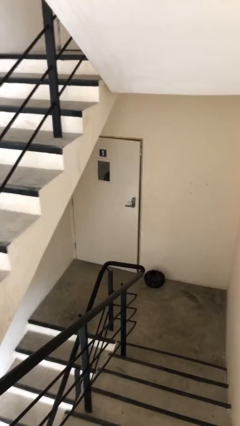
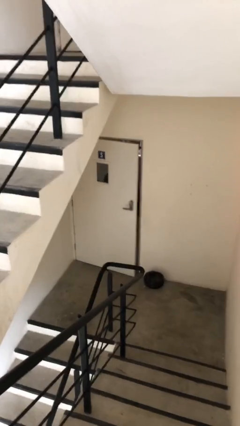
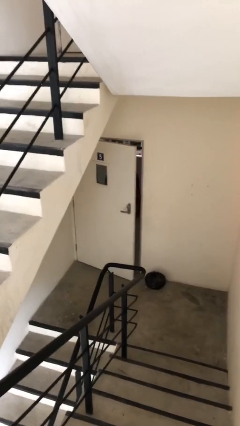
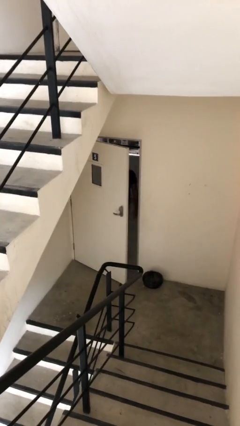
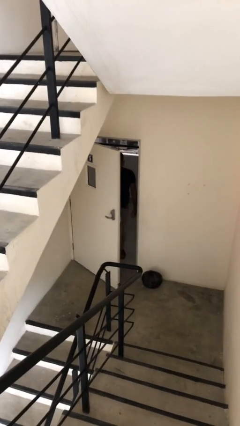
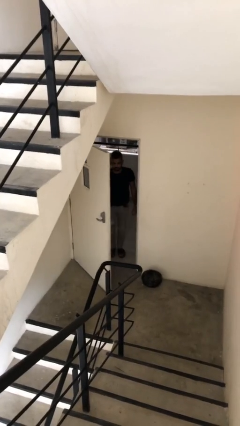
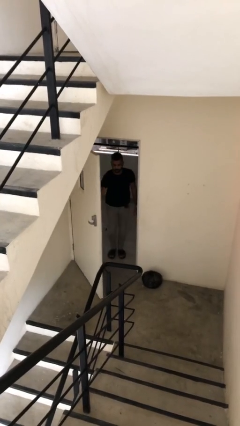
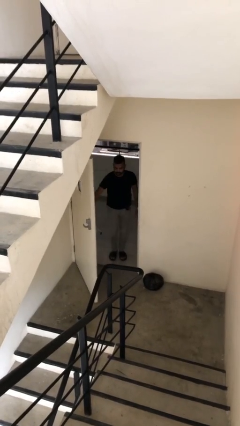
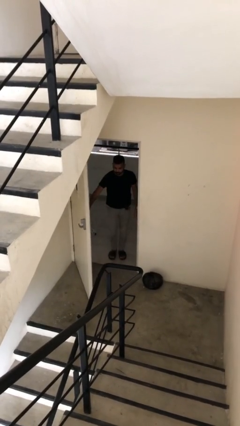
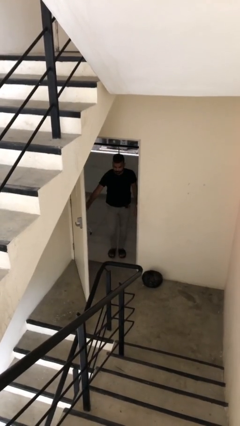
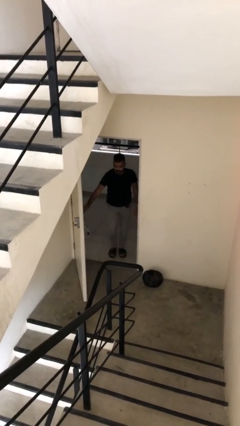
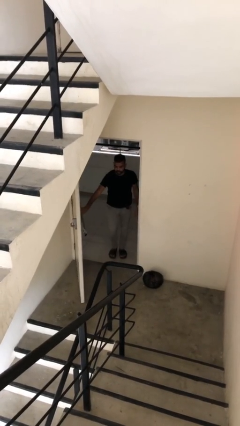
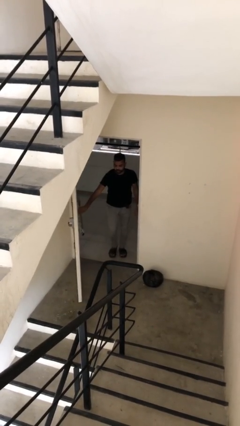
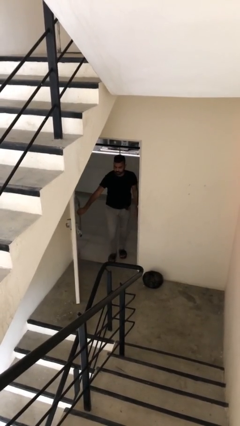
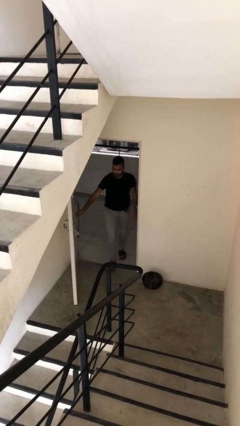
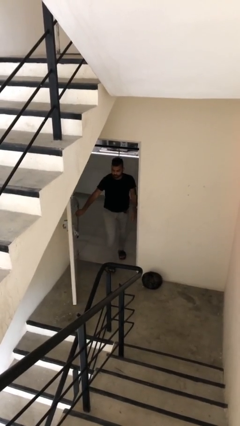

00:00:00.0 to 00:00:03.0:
person opens facility door

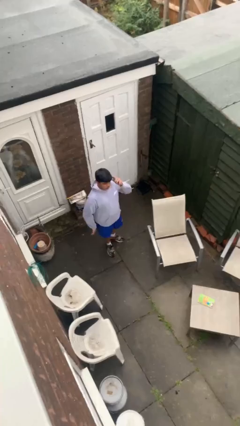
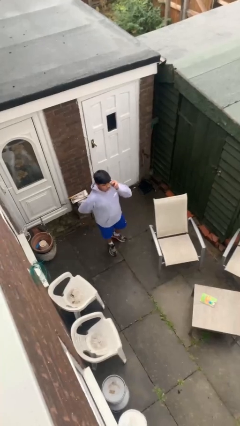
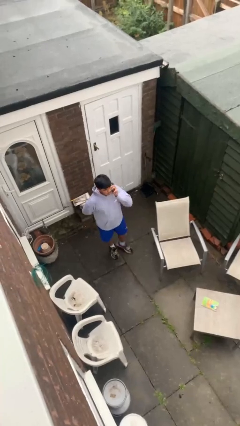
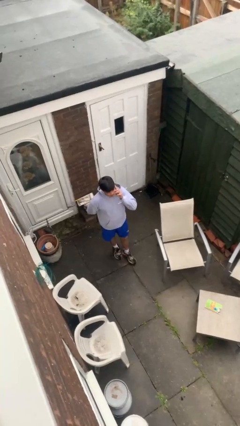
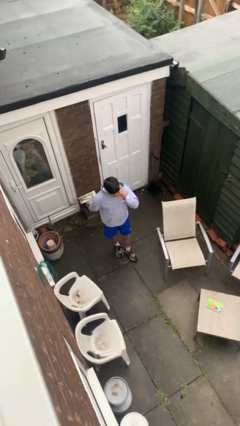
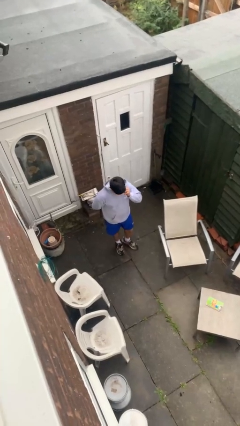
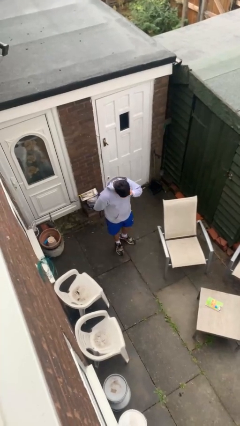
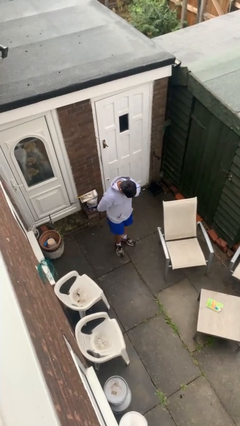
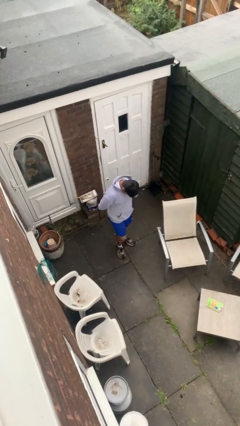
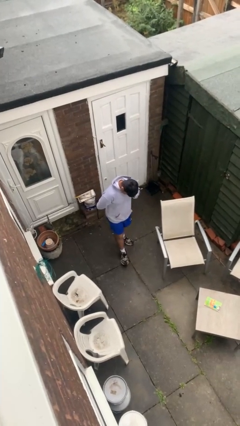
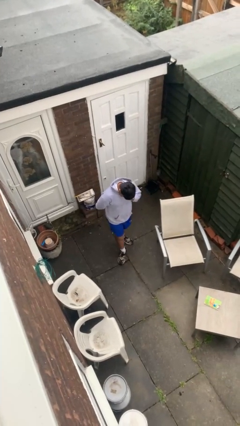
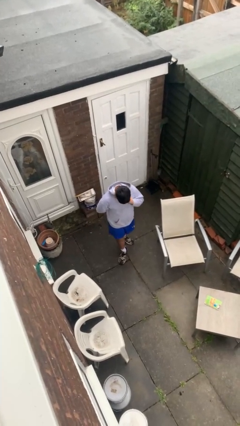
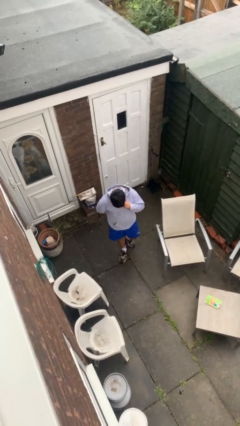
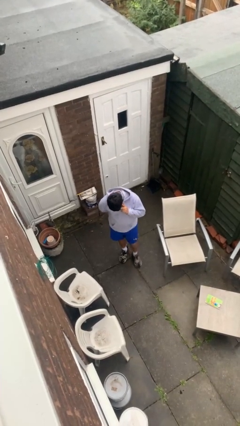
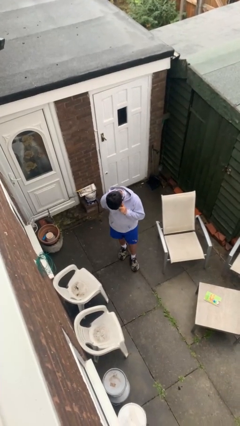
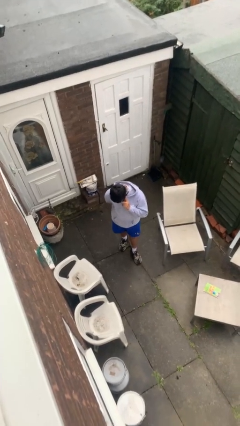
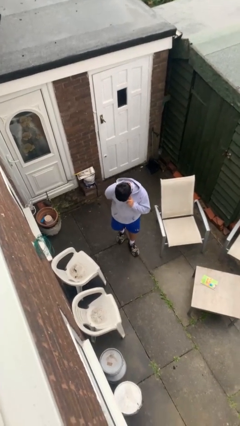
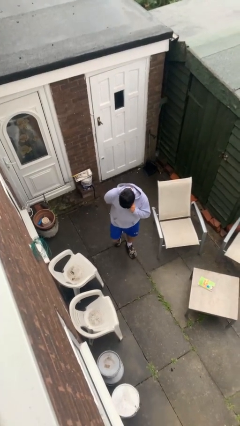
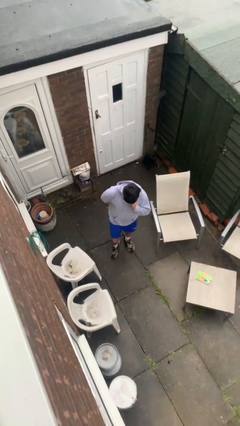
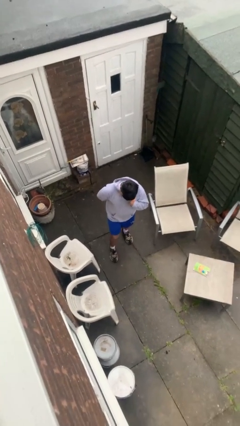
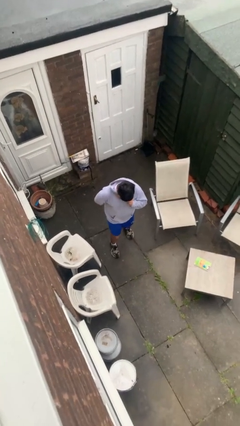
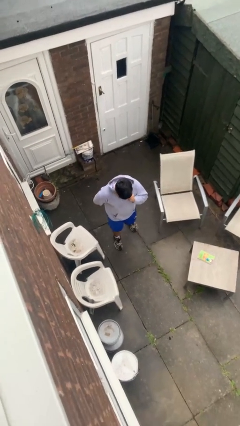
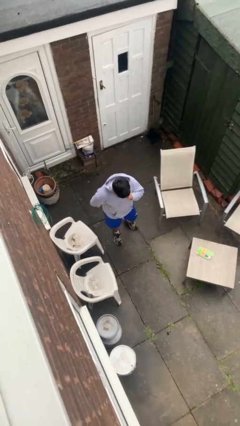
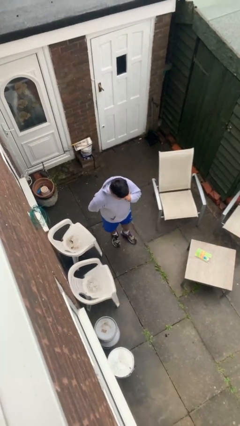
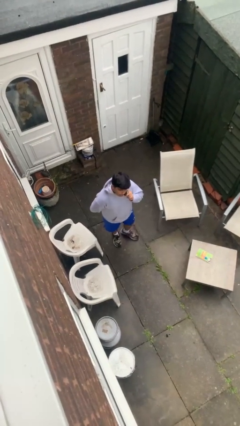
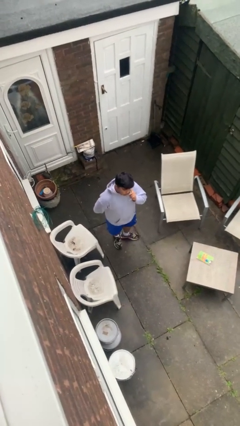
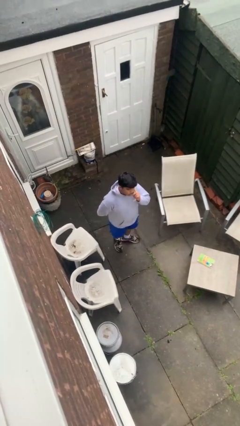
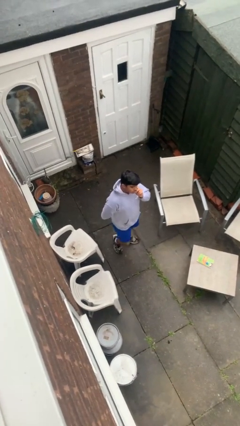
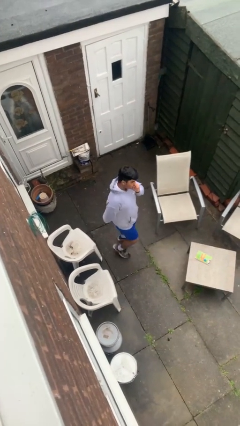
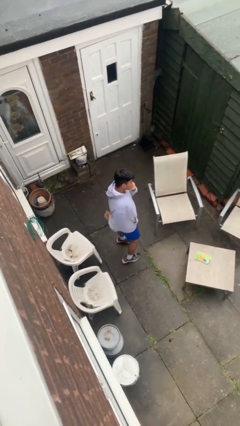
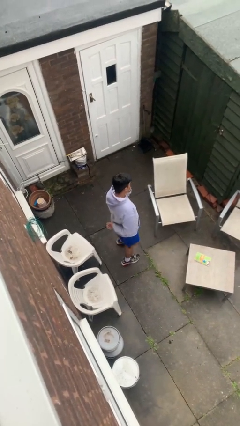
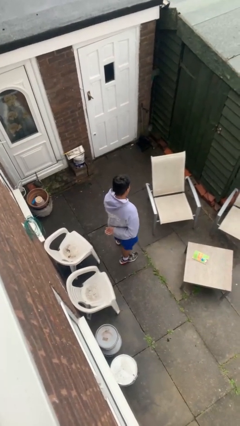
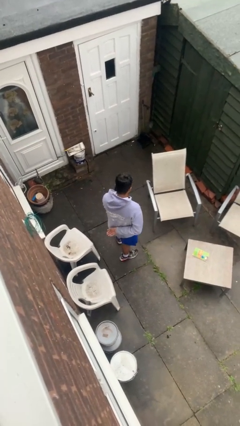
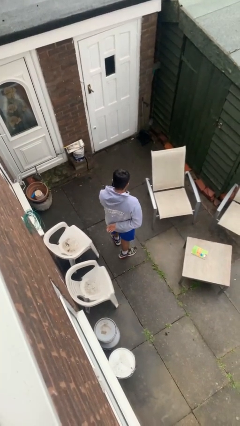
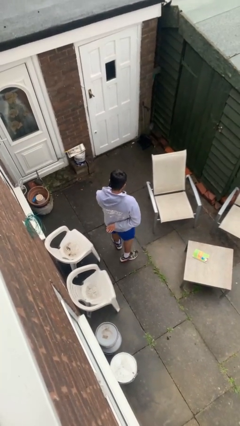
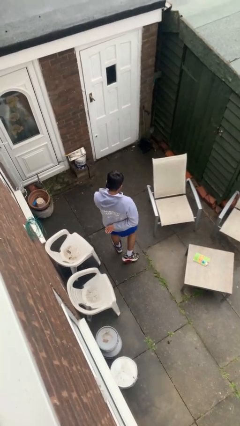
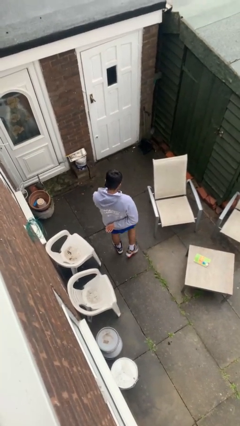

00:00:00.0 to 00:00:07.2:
person talks on phone

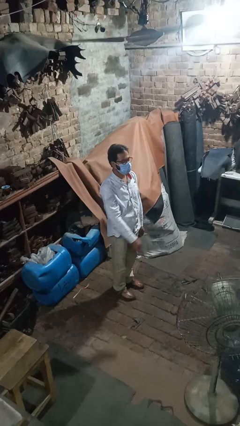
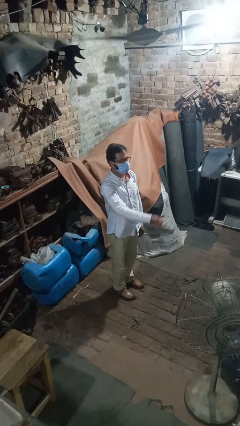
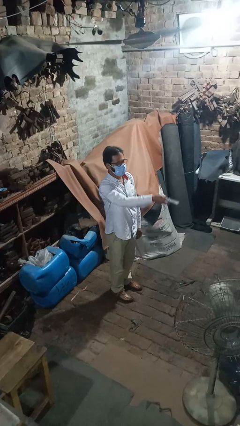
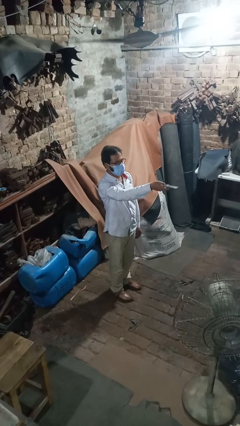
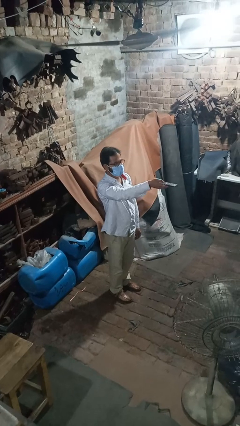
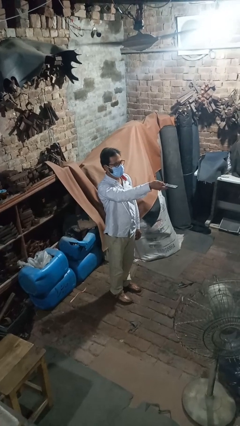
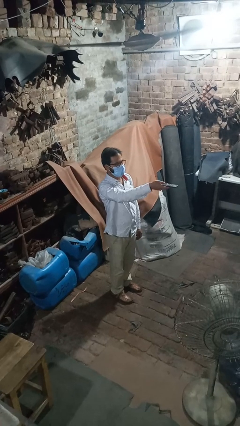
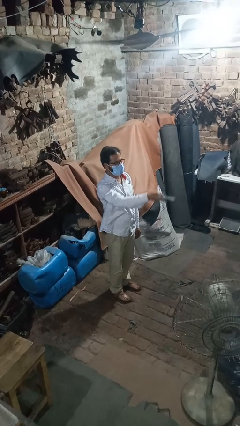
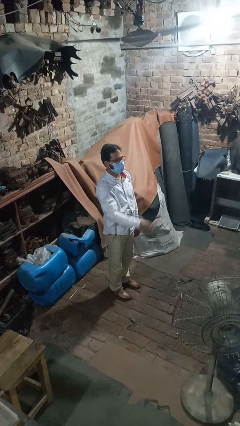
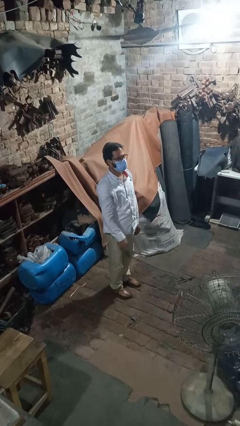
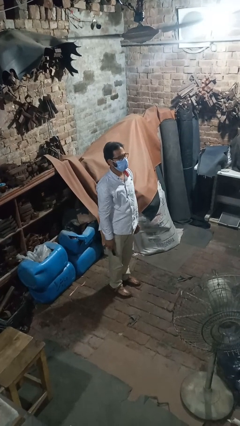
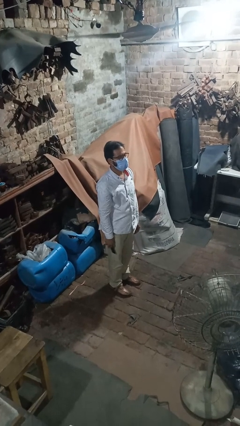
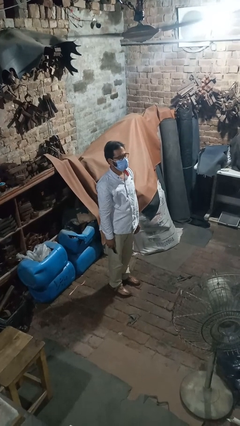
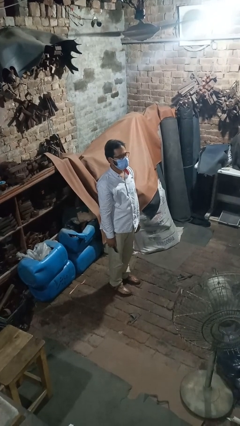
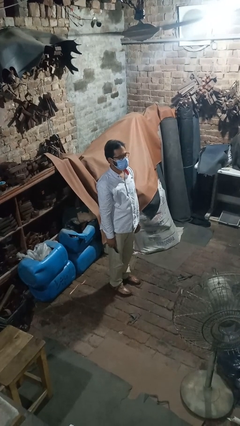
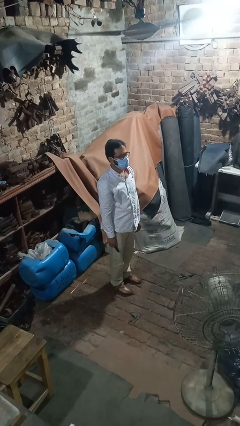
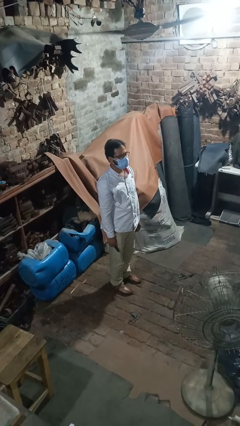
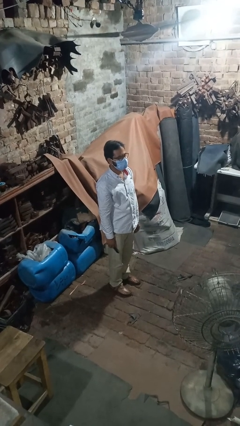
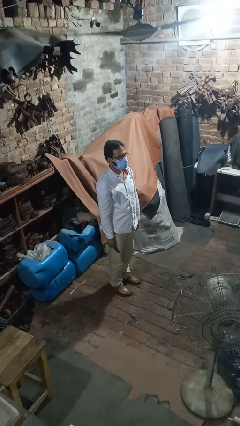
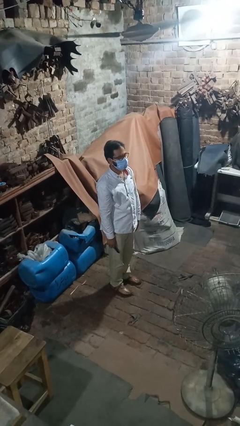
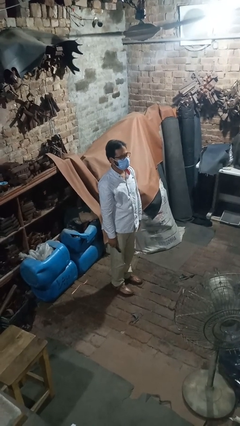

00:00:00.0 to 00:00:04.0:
person uses television remote

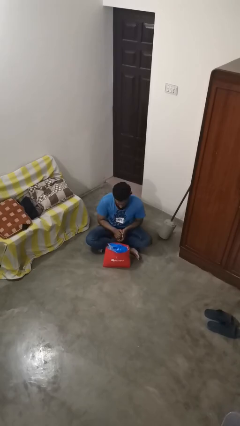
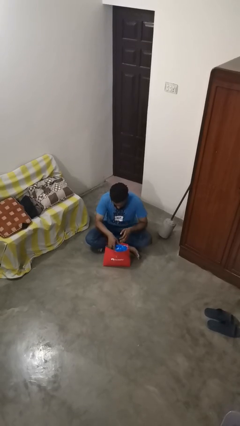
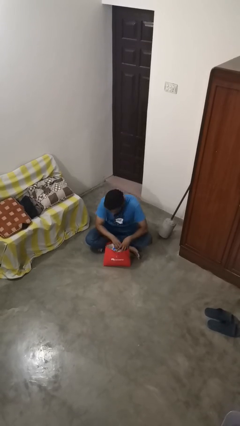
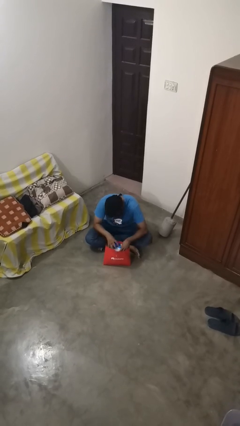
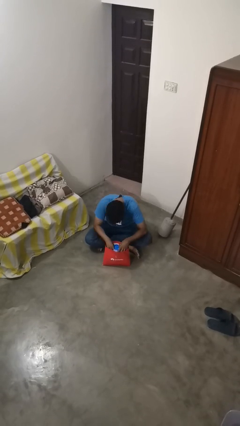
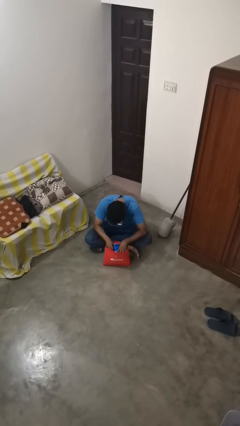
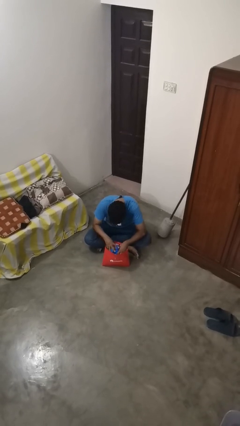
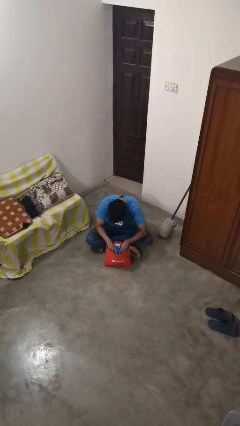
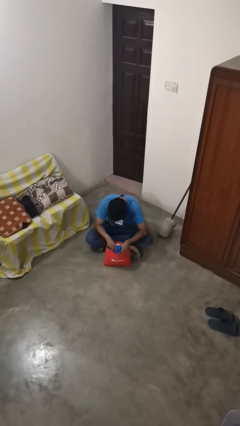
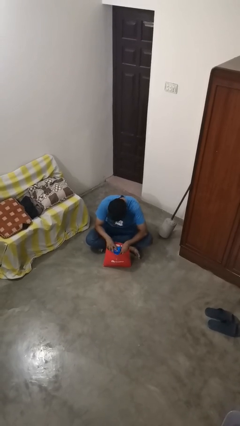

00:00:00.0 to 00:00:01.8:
person searches in bag

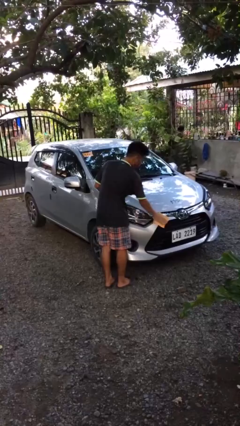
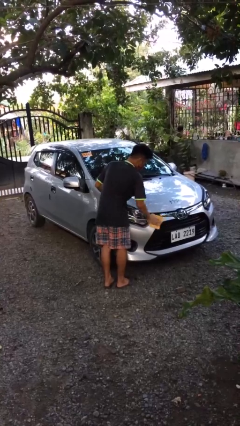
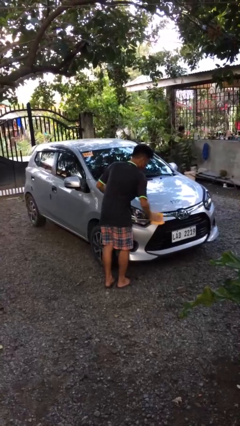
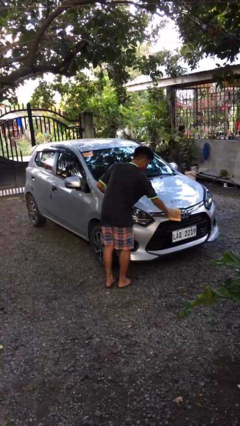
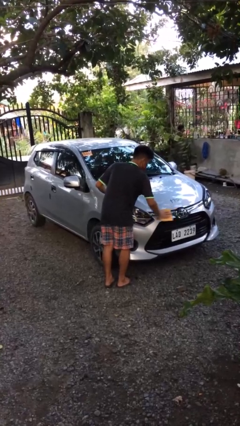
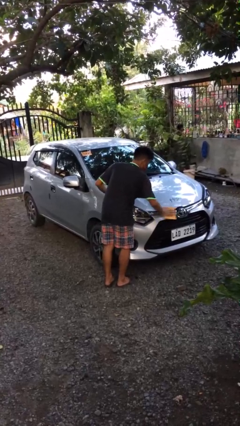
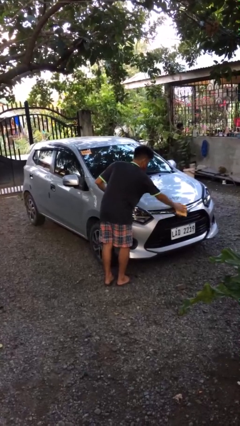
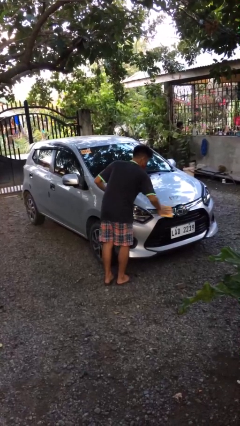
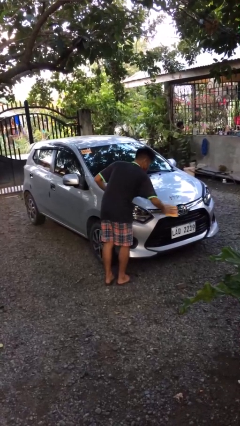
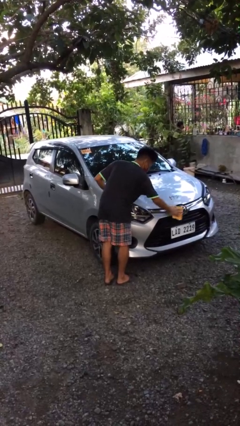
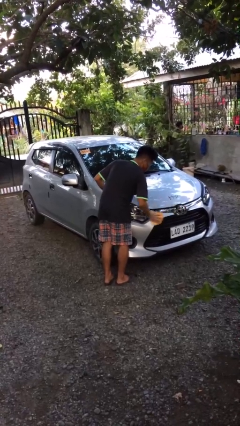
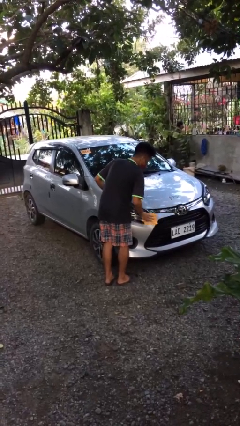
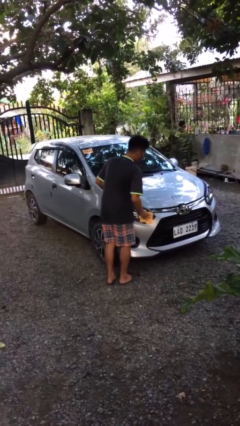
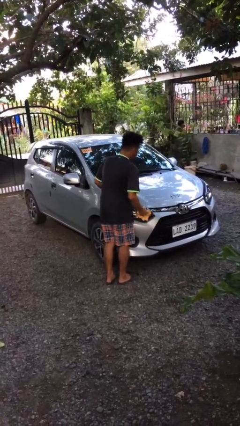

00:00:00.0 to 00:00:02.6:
person polishes car with rag
